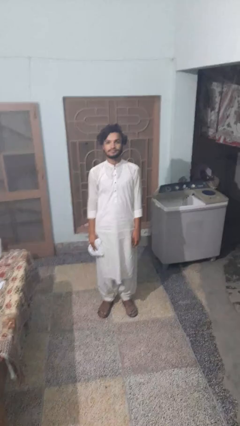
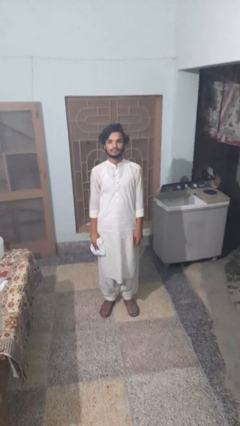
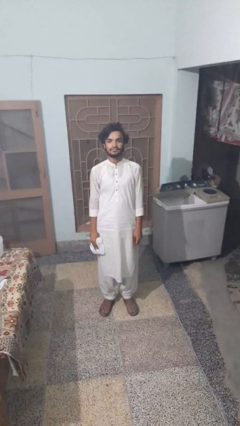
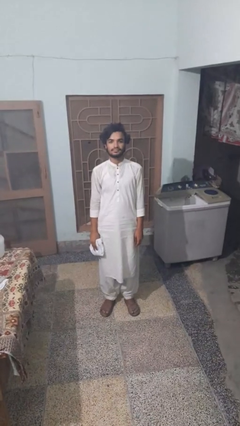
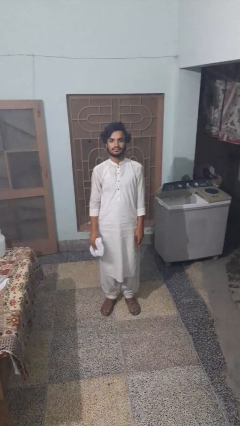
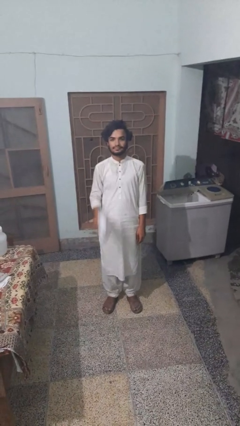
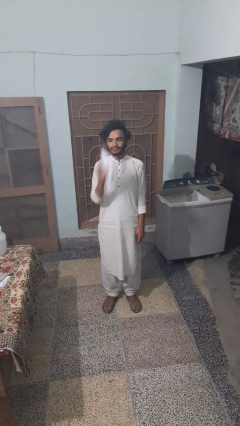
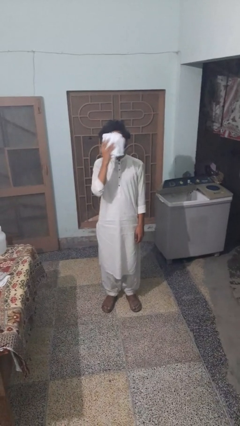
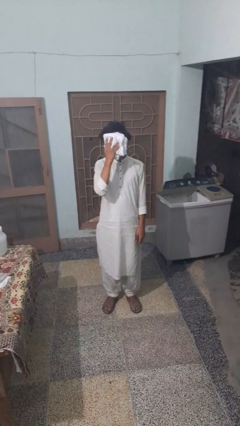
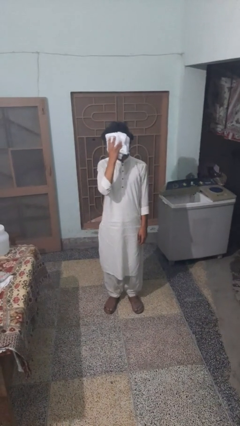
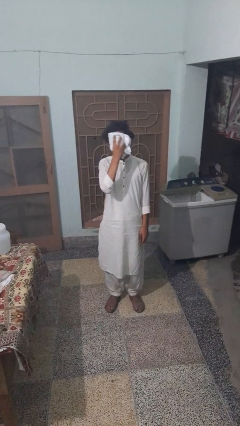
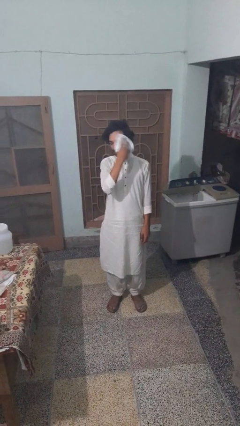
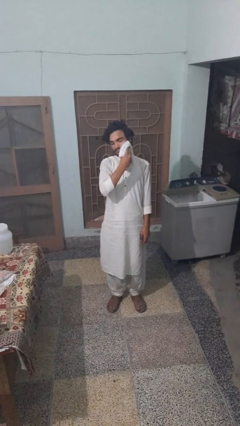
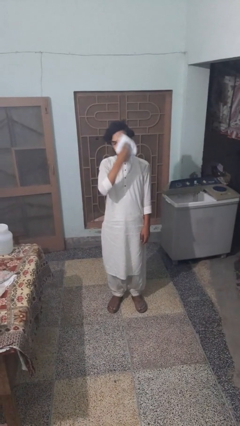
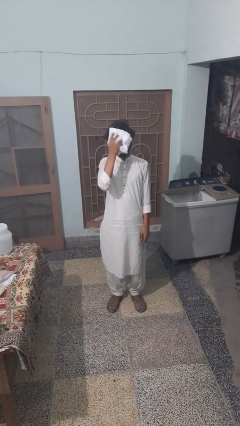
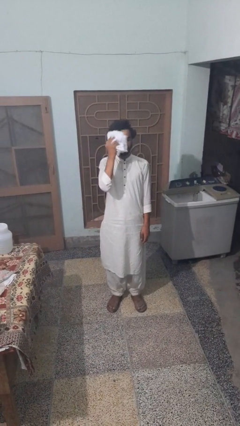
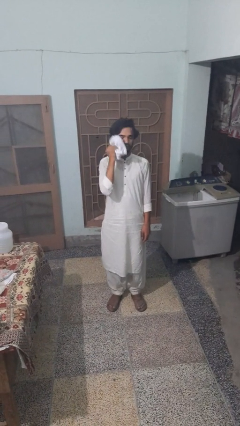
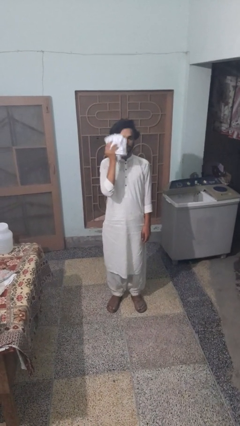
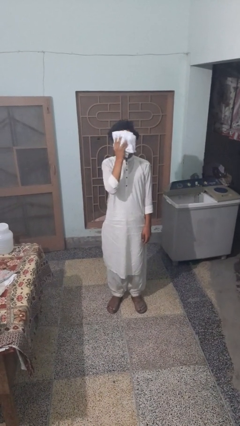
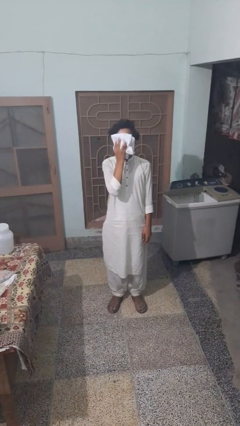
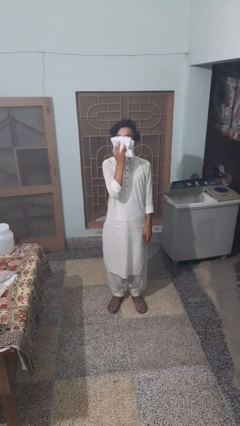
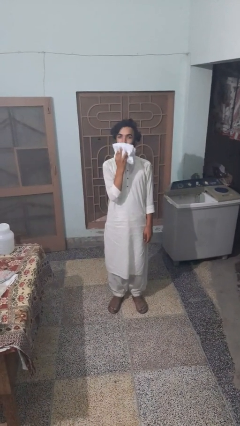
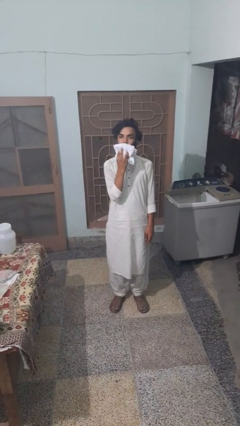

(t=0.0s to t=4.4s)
person wipes mouth with napkin

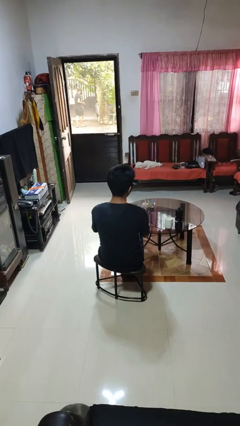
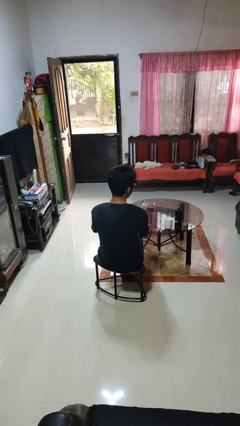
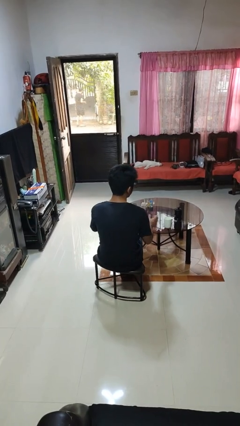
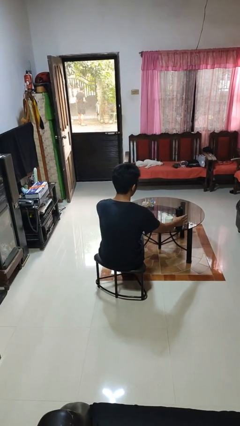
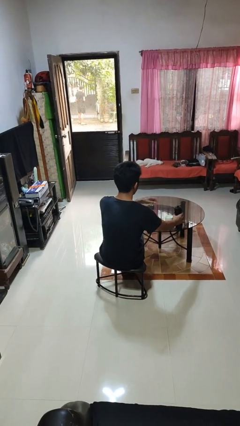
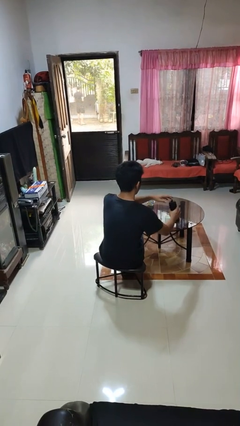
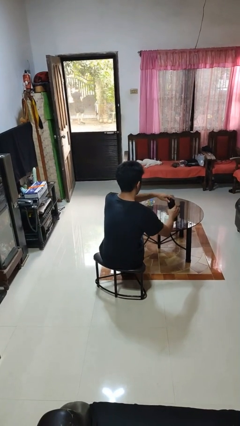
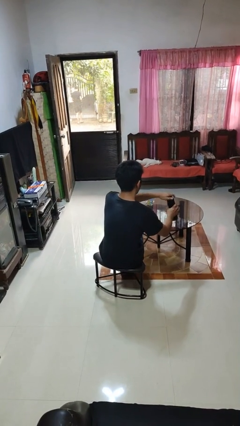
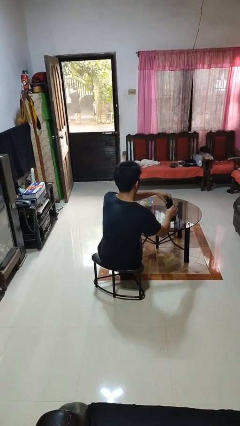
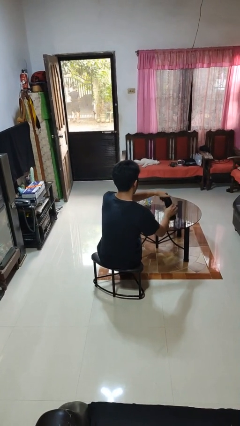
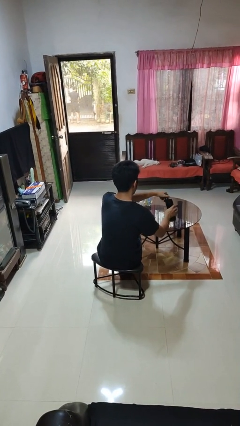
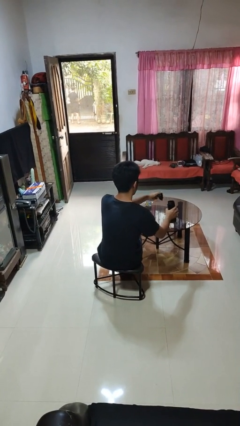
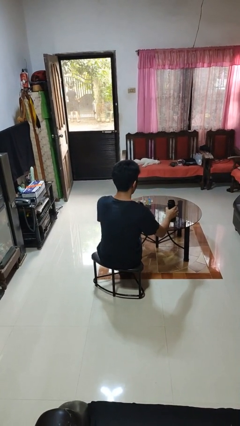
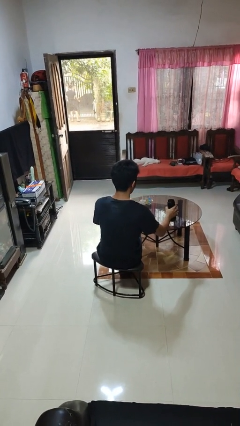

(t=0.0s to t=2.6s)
person unscrews lid from bottle

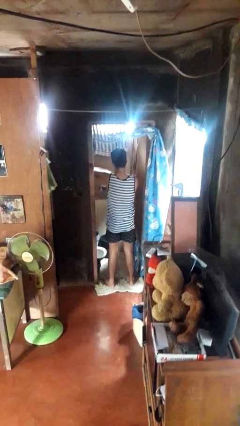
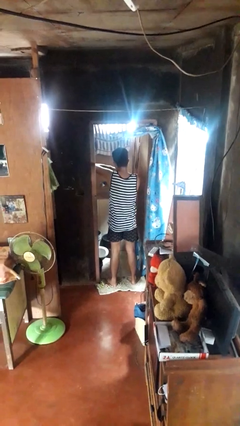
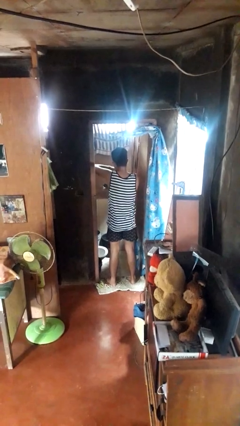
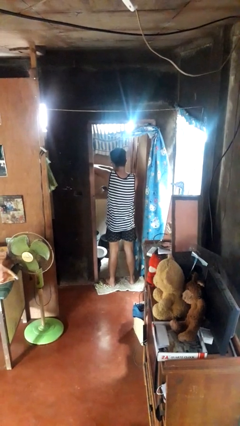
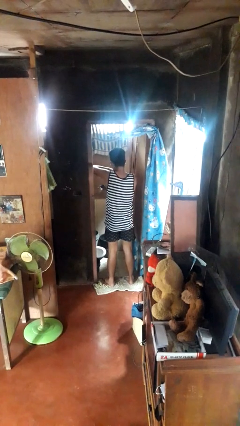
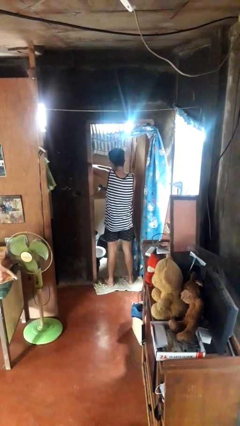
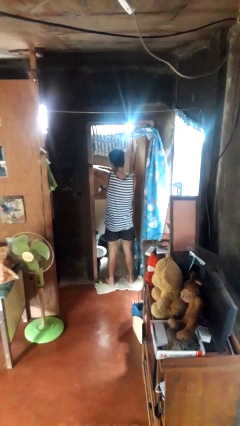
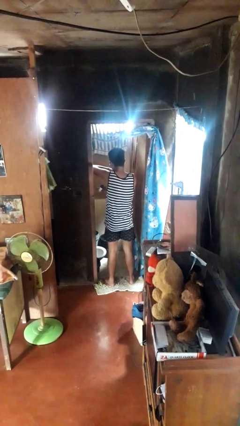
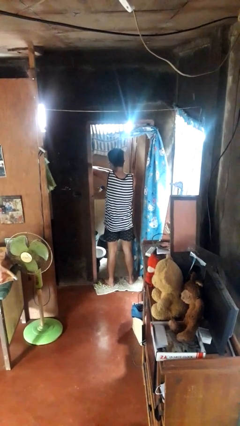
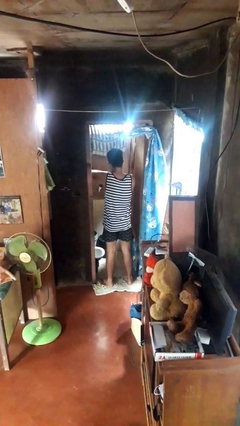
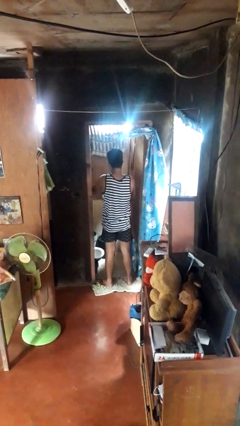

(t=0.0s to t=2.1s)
person applies deodorant

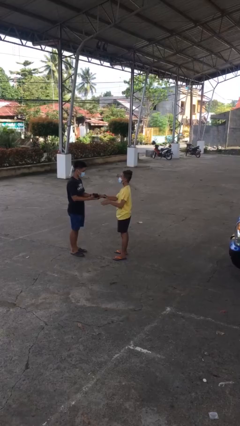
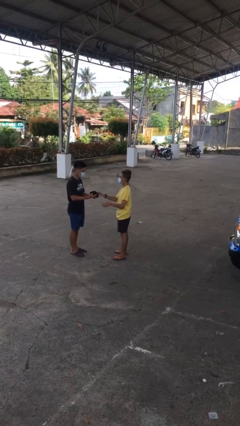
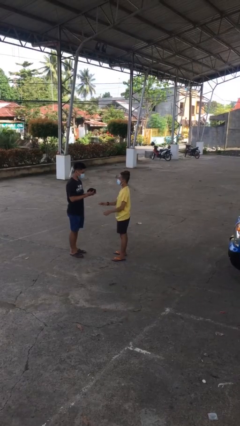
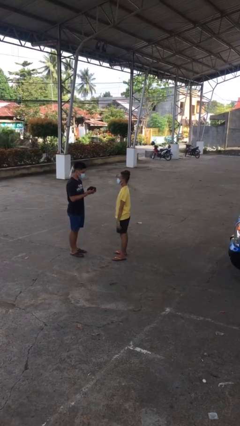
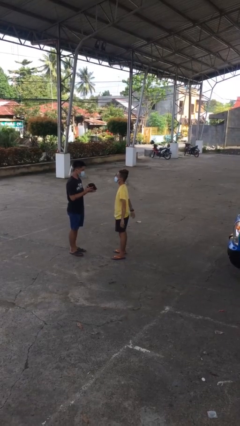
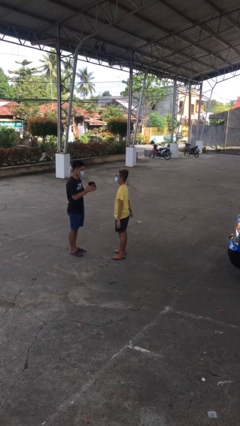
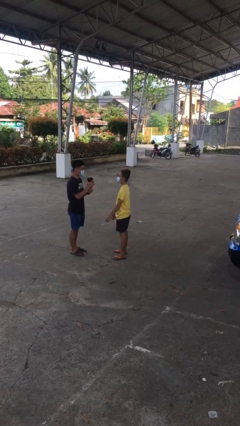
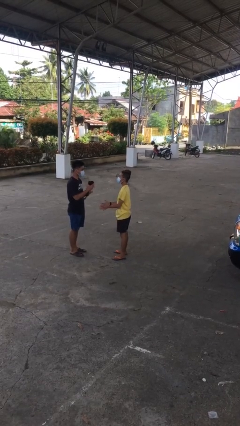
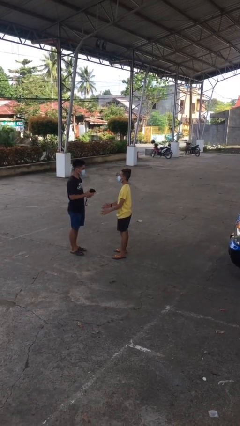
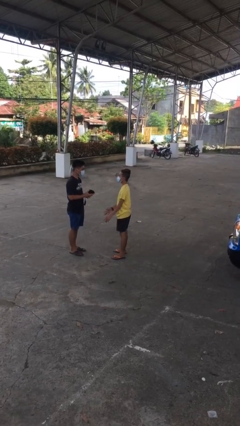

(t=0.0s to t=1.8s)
person transfers object to person

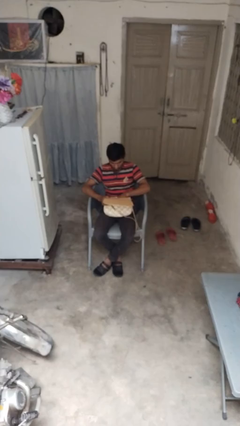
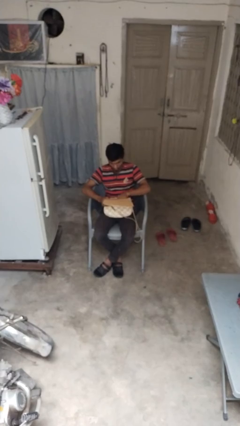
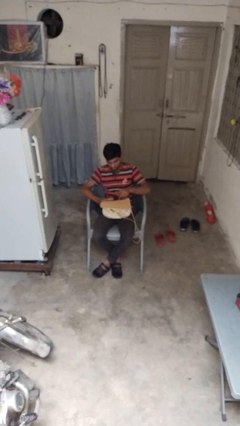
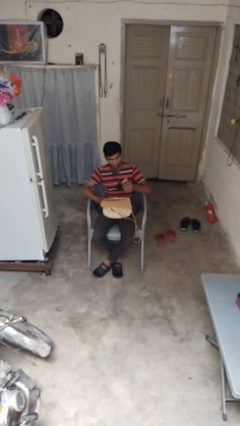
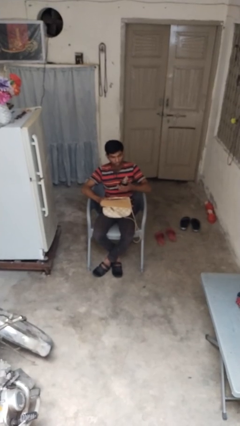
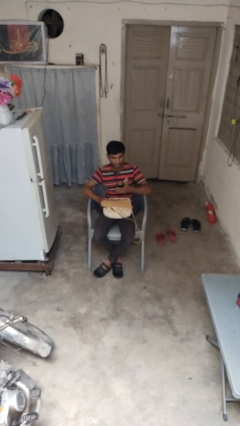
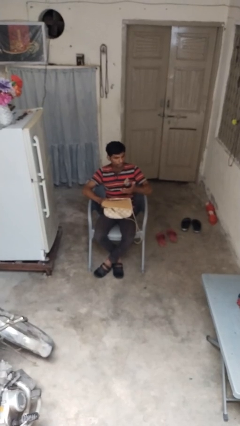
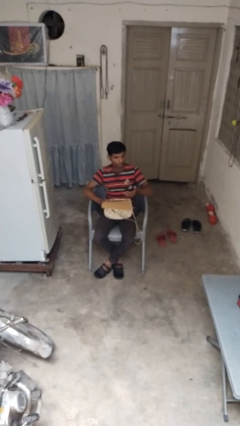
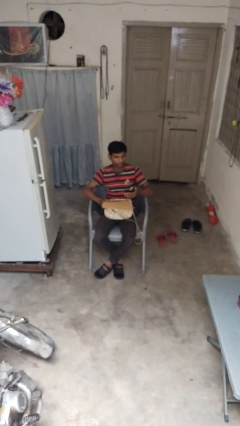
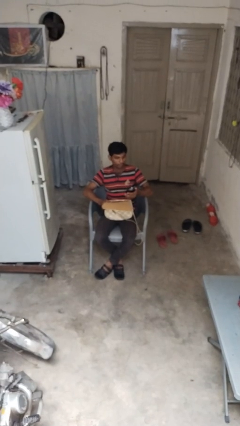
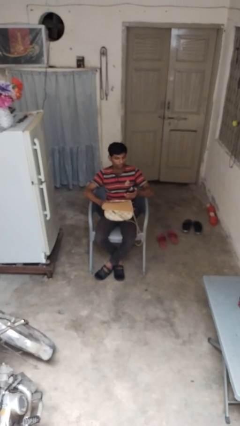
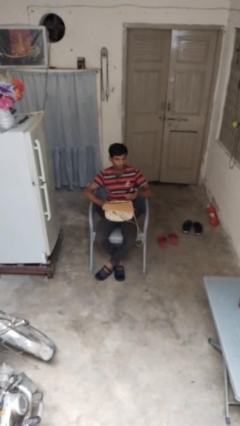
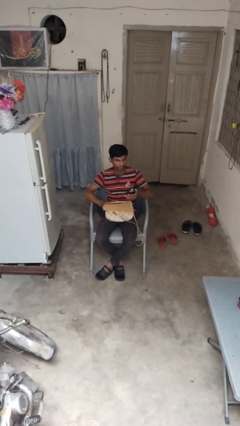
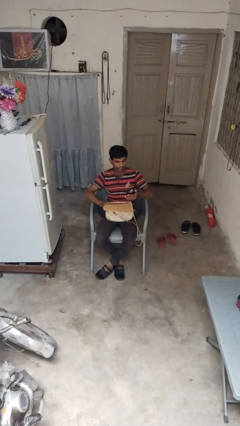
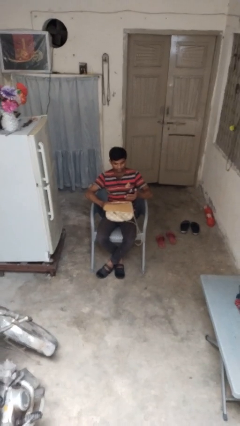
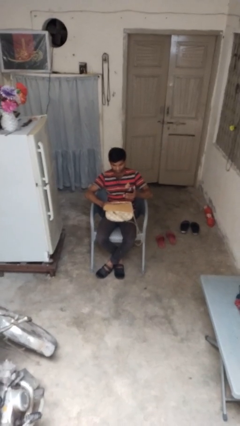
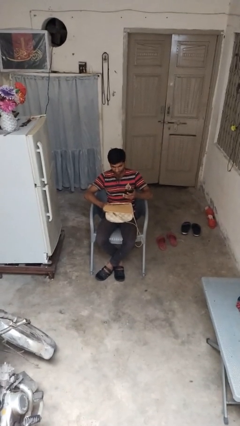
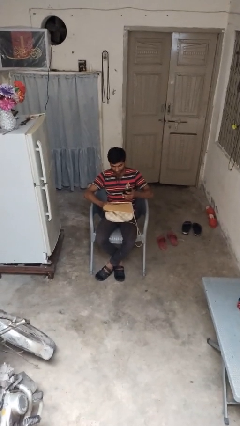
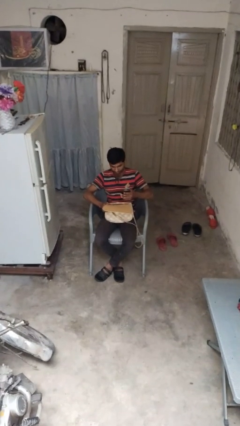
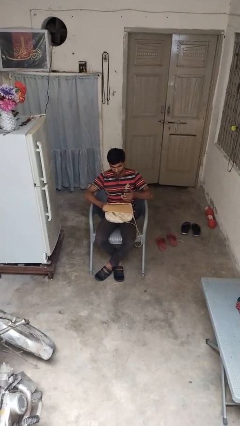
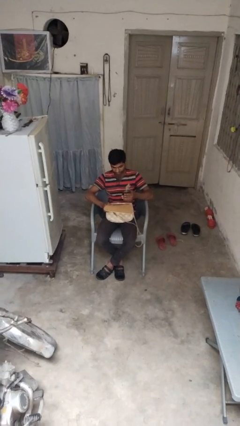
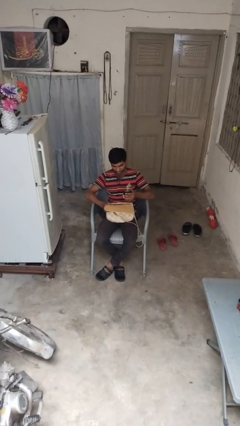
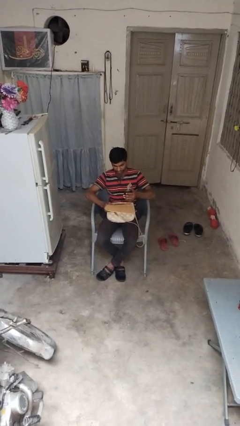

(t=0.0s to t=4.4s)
person takes object from purse

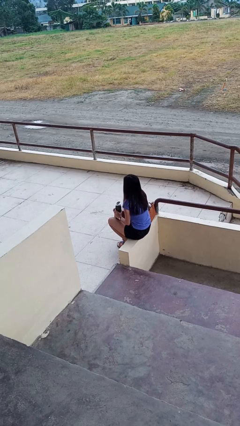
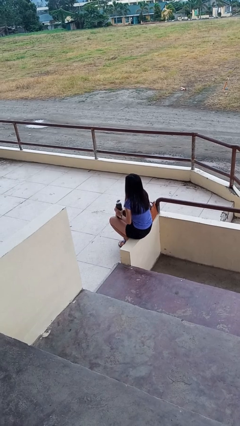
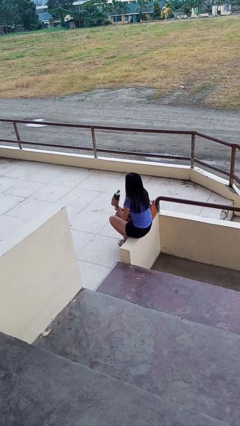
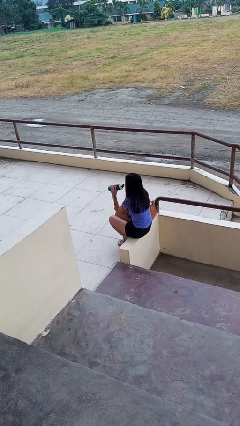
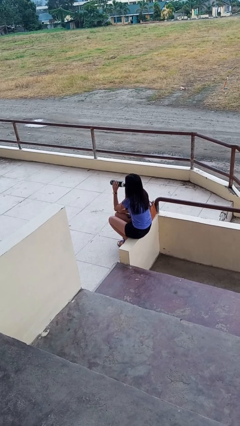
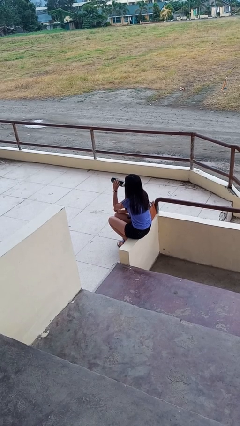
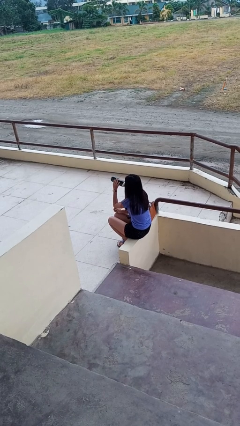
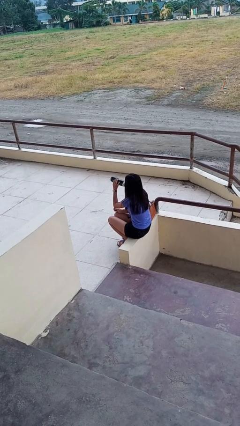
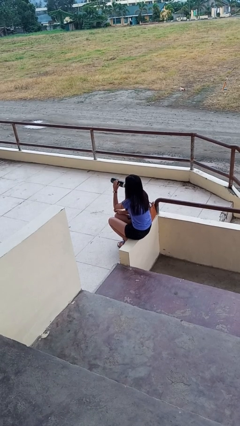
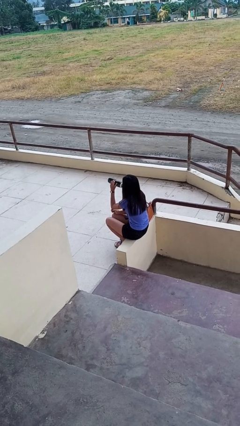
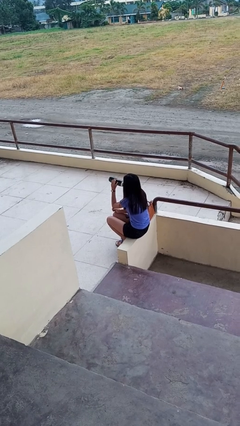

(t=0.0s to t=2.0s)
person drinks from bottle

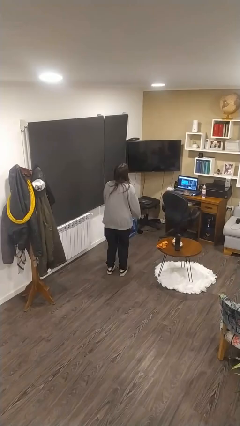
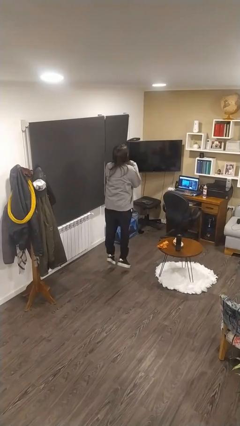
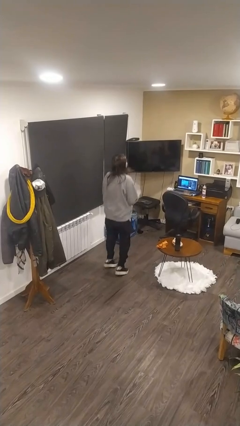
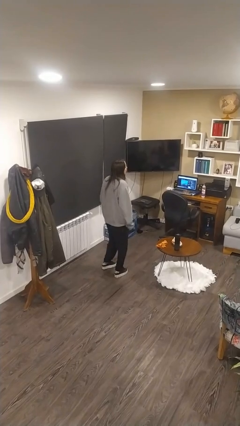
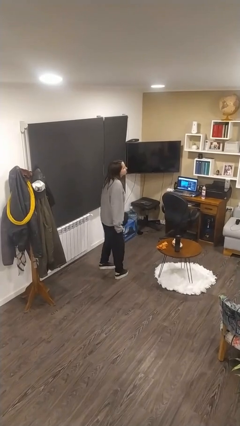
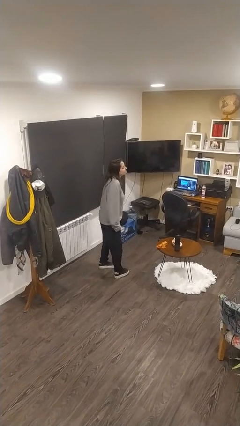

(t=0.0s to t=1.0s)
person jumps
